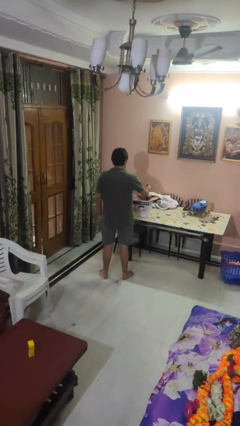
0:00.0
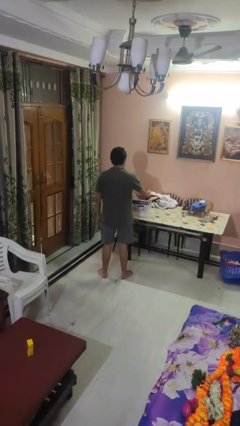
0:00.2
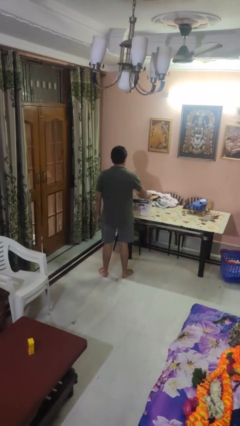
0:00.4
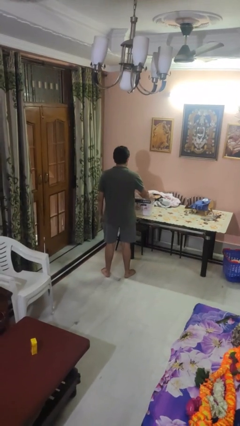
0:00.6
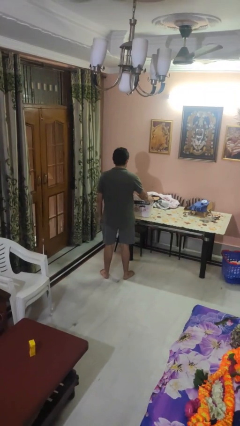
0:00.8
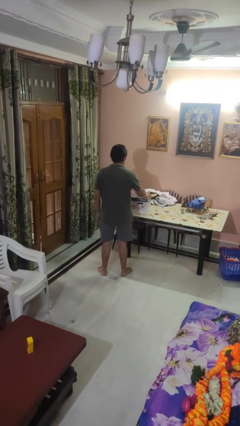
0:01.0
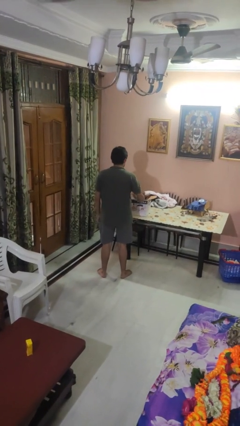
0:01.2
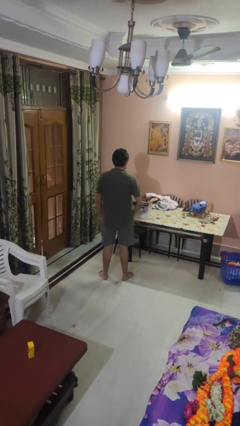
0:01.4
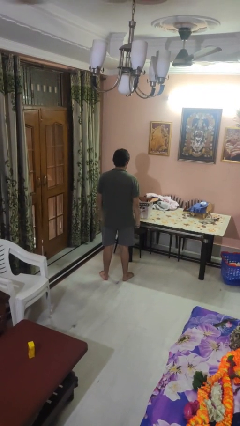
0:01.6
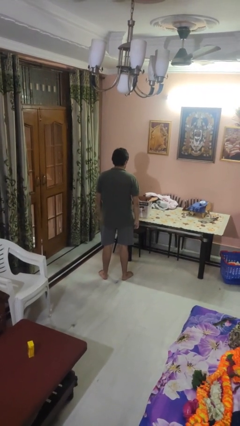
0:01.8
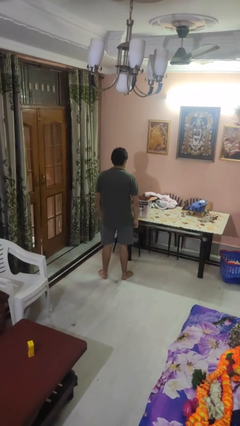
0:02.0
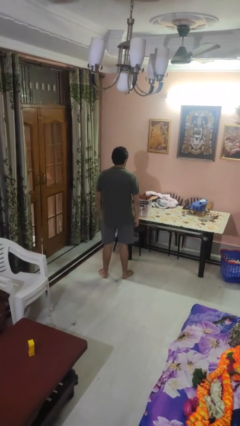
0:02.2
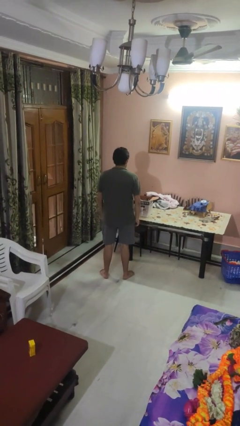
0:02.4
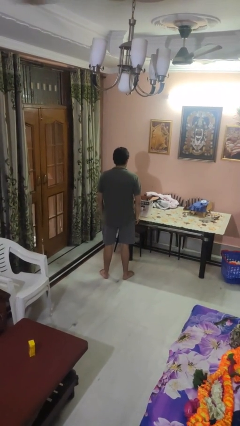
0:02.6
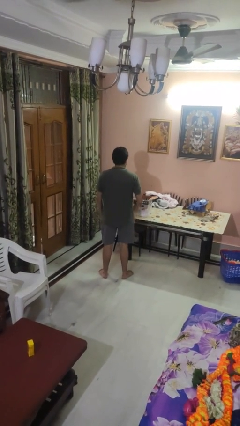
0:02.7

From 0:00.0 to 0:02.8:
person puts object into box

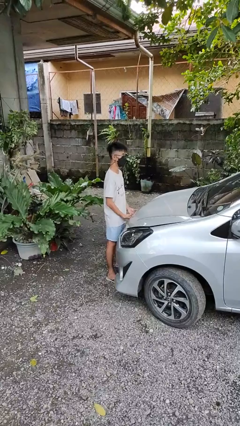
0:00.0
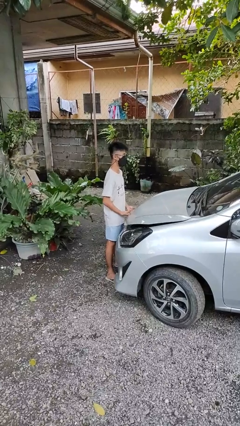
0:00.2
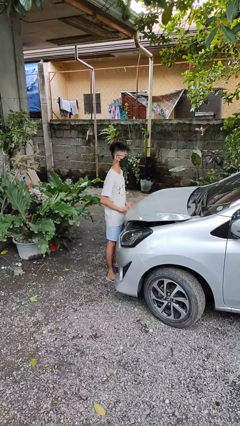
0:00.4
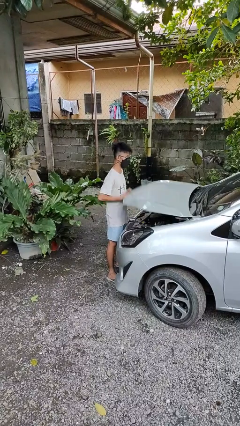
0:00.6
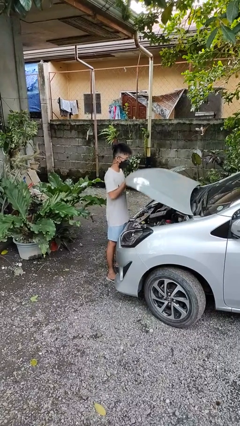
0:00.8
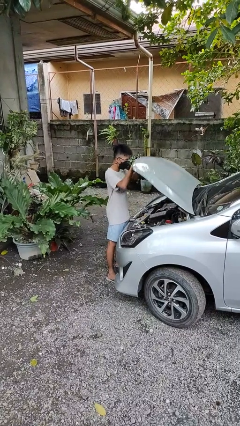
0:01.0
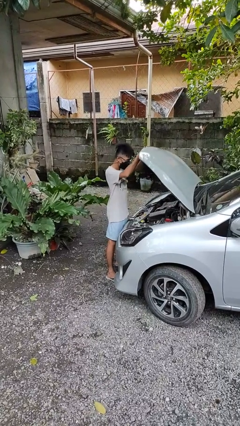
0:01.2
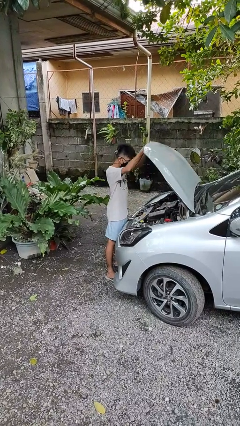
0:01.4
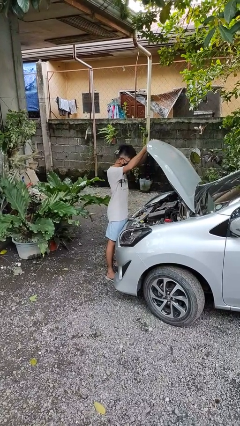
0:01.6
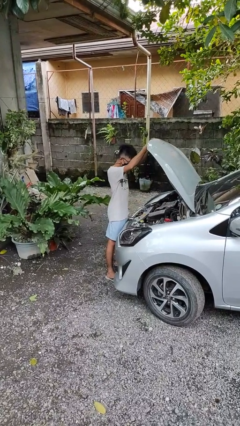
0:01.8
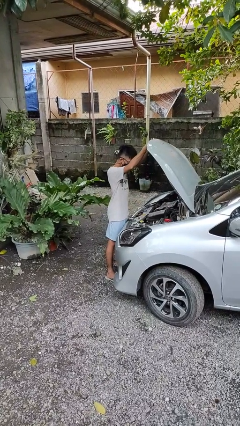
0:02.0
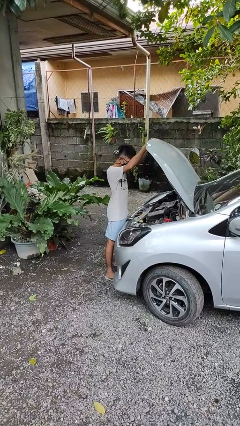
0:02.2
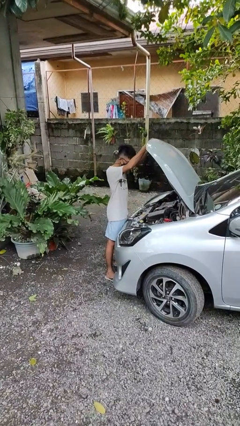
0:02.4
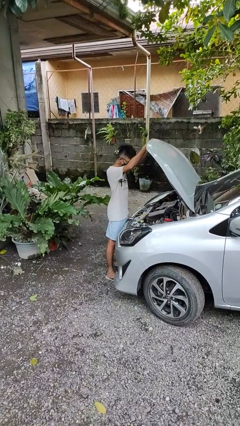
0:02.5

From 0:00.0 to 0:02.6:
person opens car hood

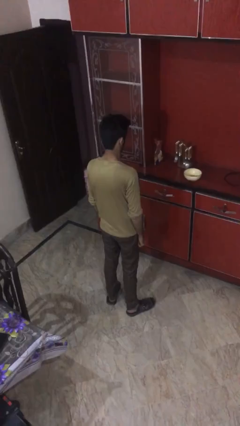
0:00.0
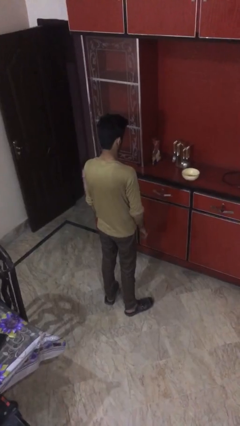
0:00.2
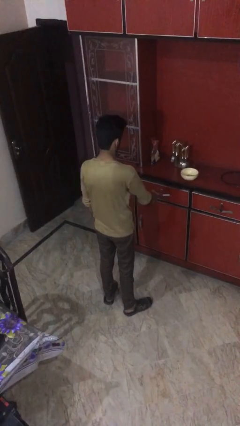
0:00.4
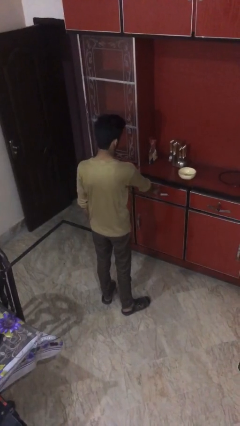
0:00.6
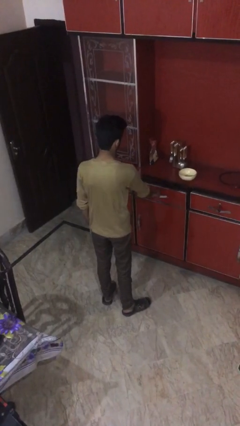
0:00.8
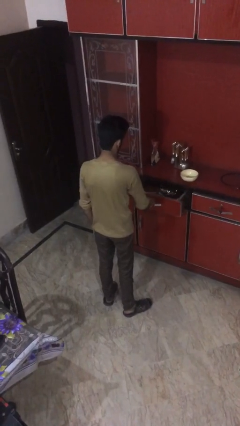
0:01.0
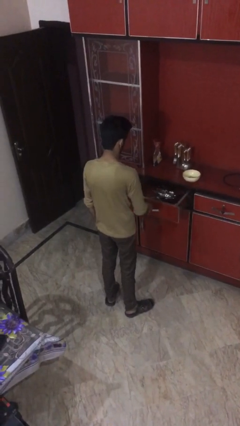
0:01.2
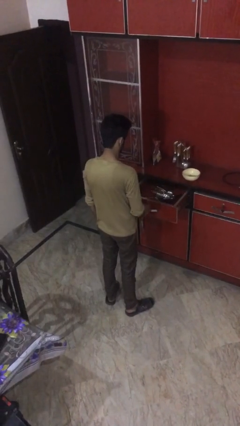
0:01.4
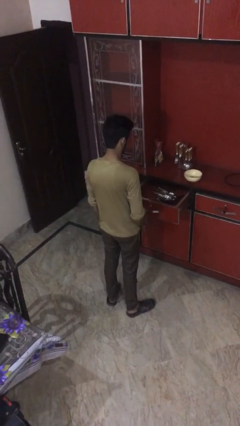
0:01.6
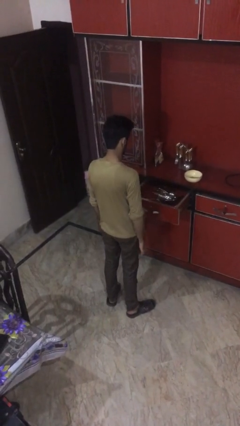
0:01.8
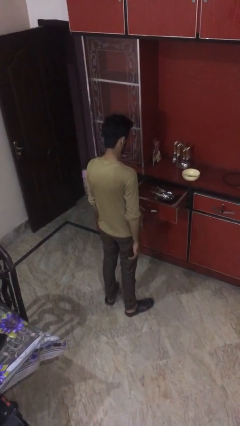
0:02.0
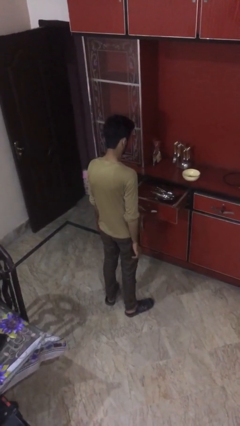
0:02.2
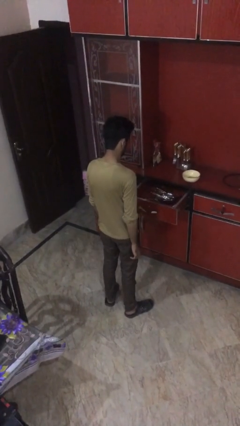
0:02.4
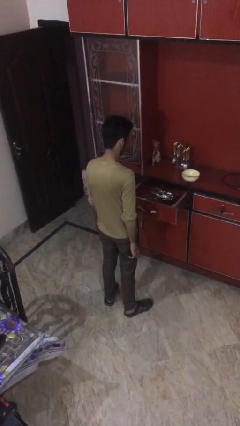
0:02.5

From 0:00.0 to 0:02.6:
person opens kitchen drawer

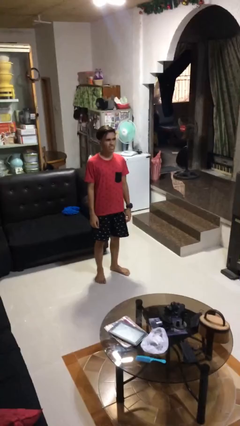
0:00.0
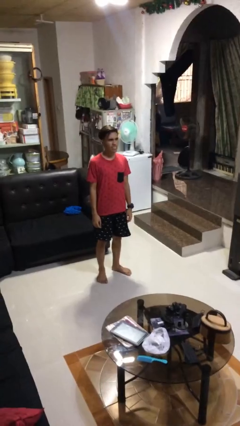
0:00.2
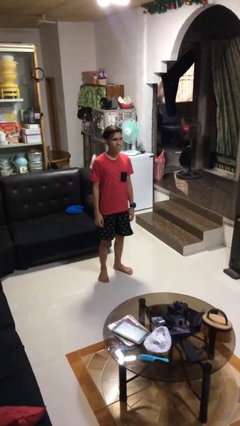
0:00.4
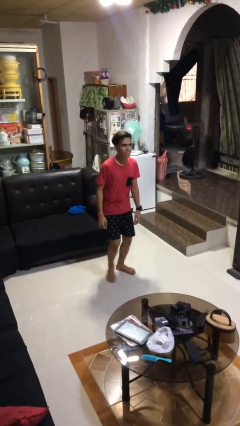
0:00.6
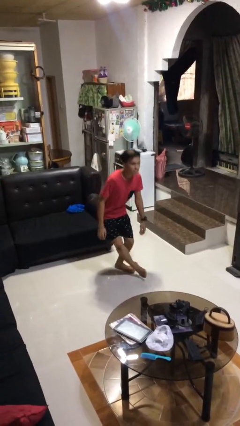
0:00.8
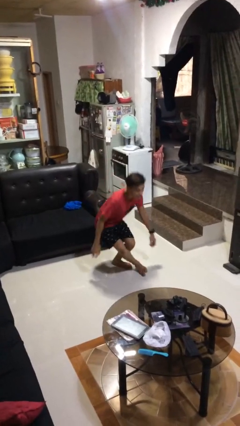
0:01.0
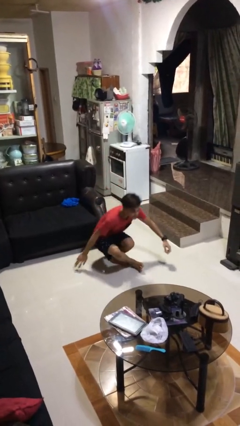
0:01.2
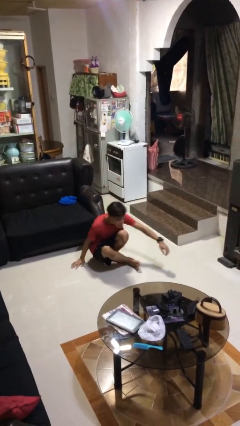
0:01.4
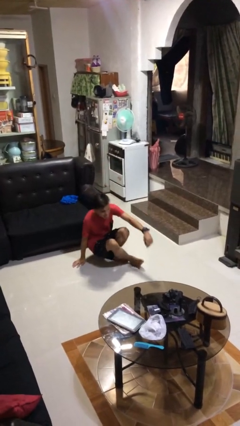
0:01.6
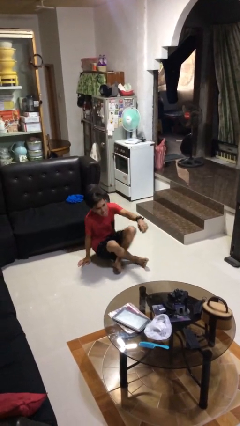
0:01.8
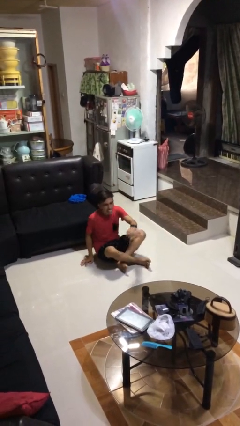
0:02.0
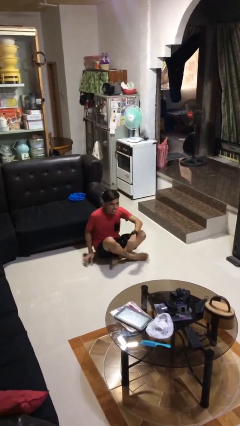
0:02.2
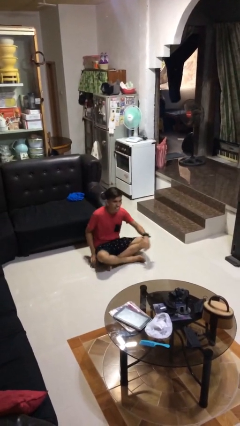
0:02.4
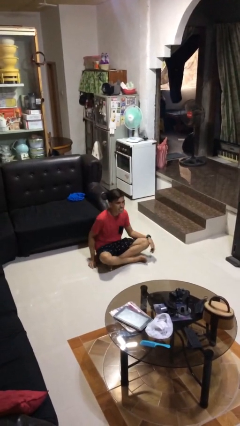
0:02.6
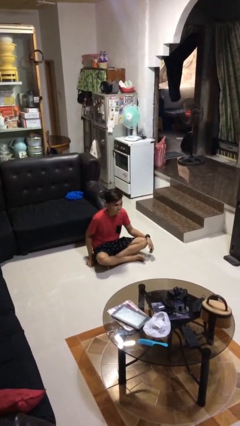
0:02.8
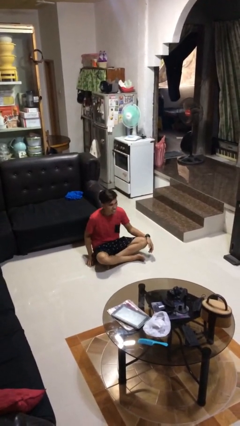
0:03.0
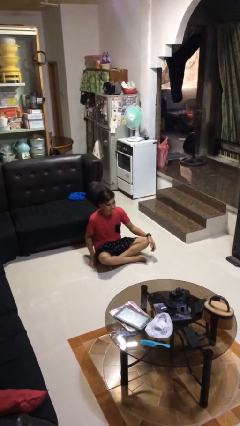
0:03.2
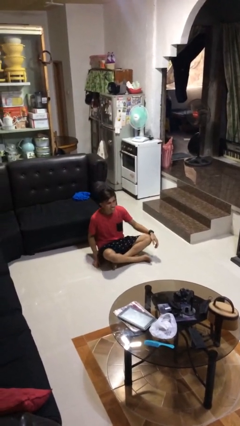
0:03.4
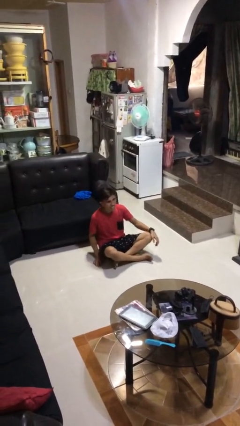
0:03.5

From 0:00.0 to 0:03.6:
person sits crisscross

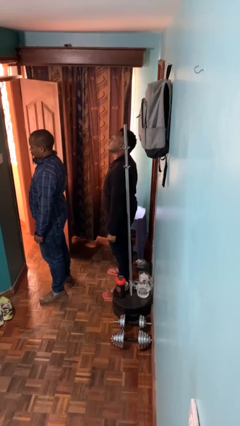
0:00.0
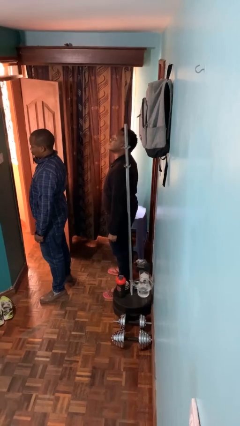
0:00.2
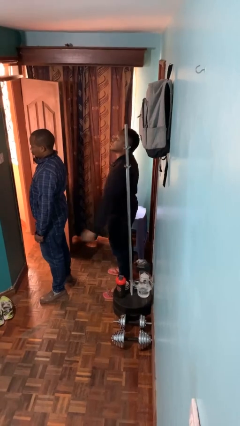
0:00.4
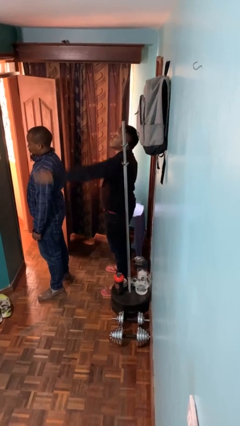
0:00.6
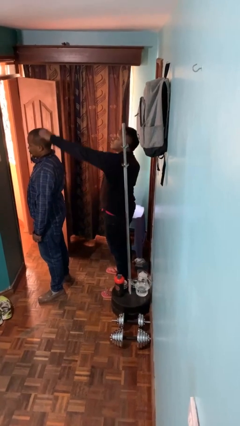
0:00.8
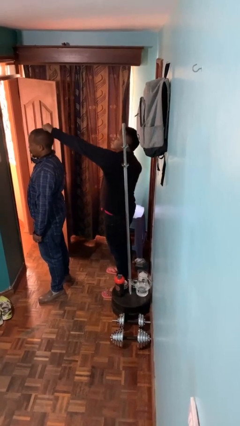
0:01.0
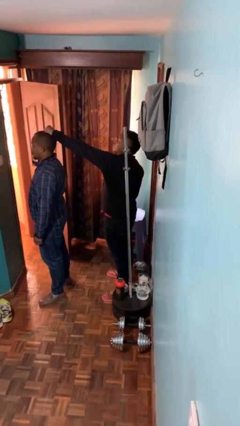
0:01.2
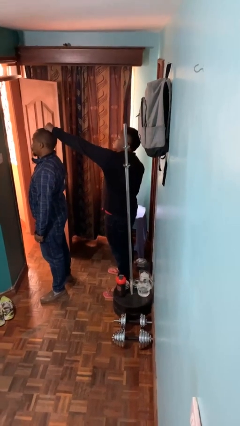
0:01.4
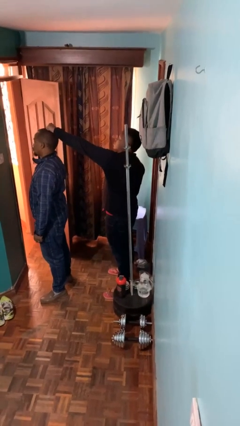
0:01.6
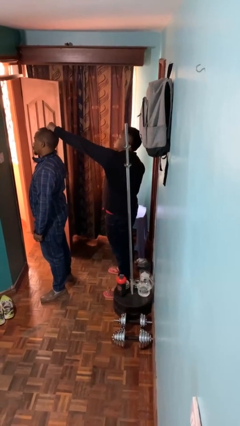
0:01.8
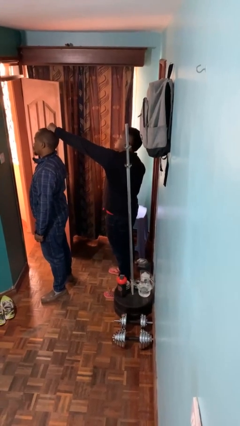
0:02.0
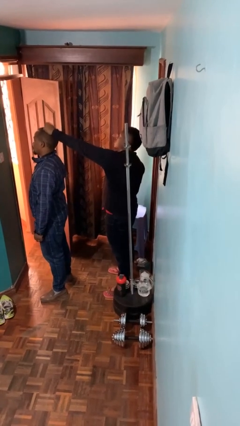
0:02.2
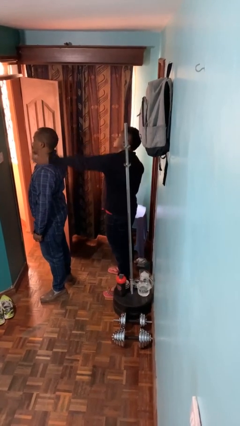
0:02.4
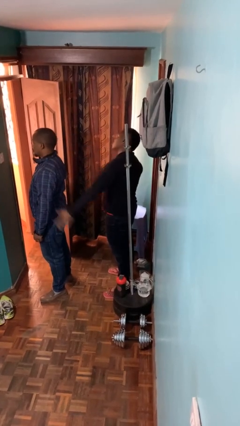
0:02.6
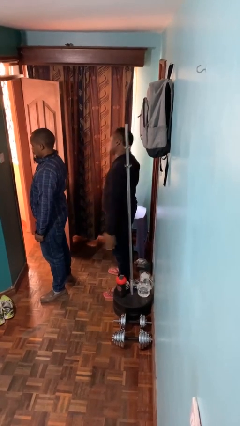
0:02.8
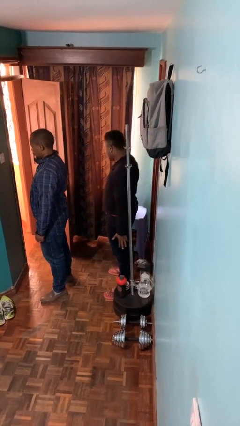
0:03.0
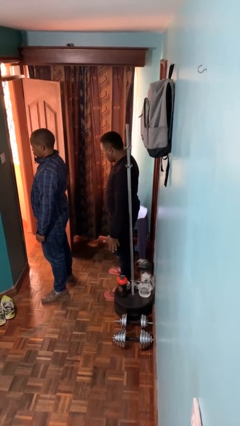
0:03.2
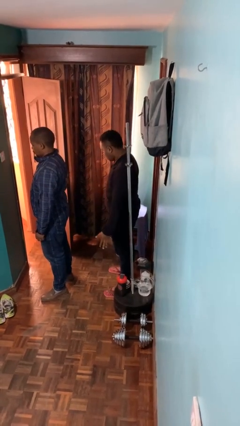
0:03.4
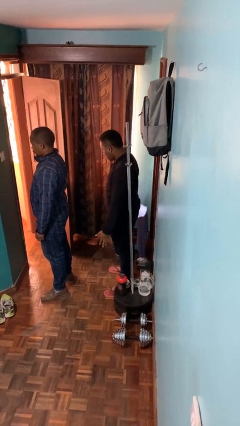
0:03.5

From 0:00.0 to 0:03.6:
person grabs person by hair

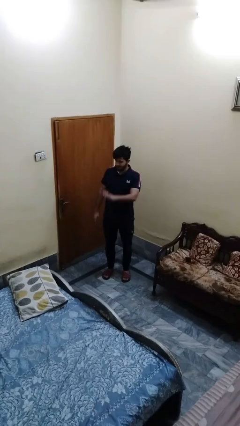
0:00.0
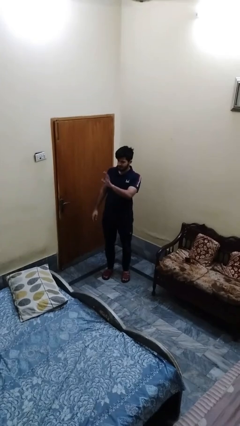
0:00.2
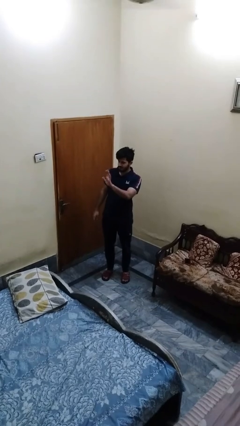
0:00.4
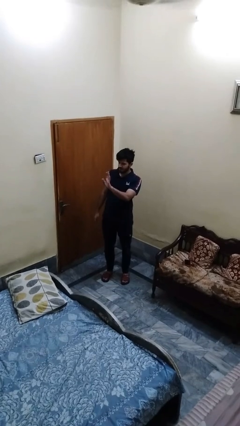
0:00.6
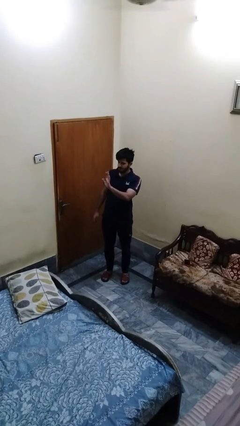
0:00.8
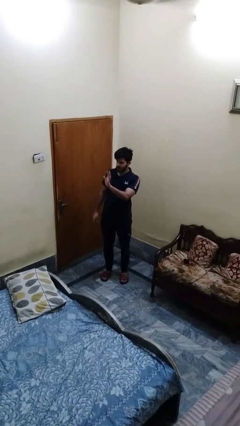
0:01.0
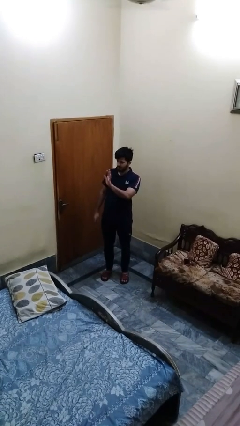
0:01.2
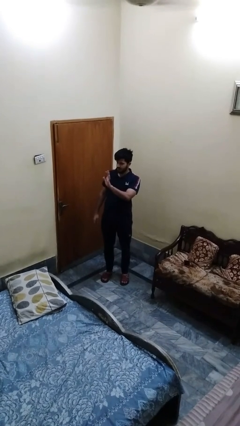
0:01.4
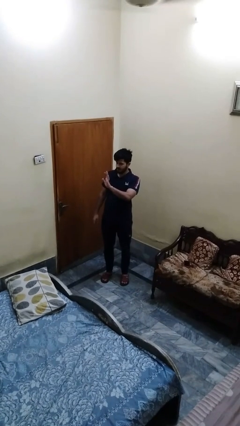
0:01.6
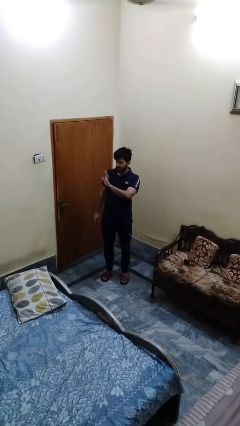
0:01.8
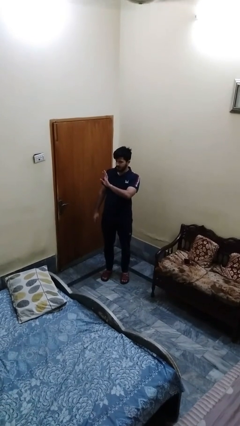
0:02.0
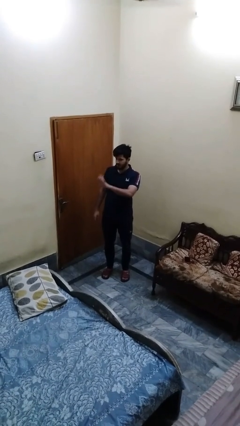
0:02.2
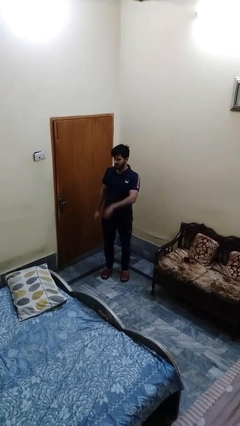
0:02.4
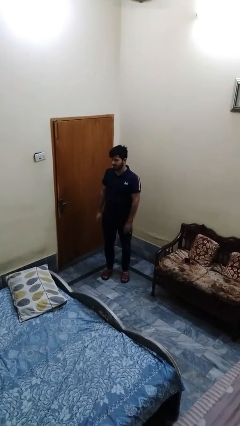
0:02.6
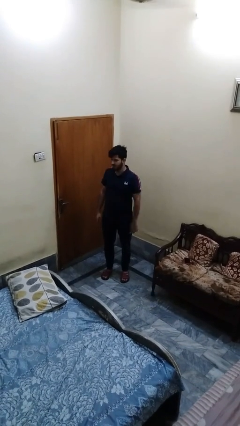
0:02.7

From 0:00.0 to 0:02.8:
person waves at person
